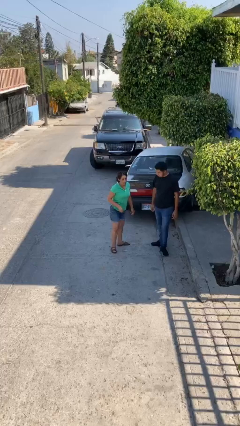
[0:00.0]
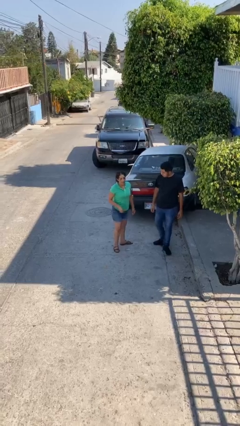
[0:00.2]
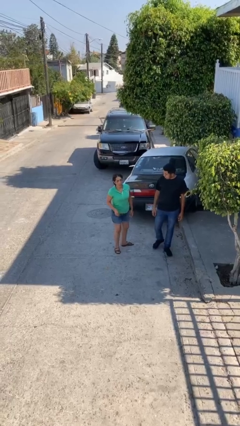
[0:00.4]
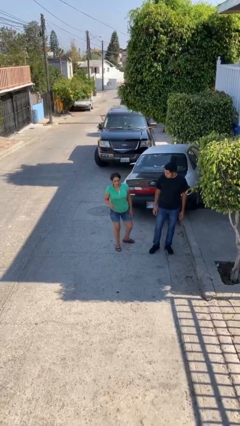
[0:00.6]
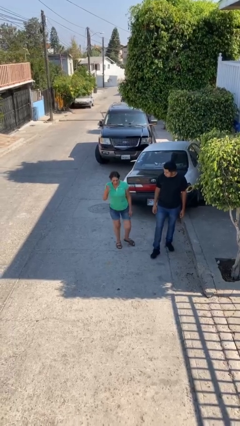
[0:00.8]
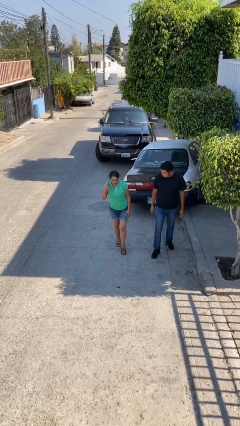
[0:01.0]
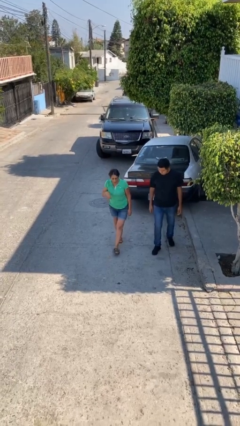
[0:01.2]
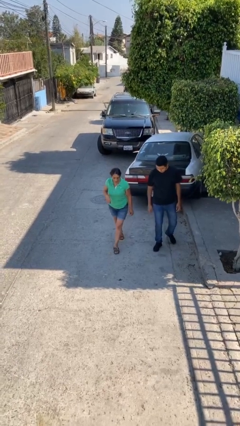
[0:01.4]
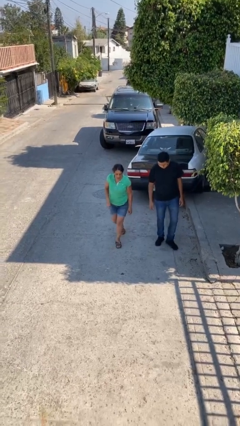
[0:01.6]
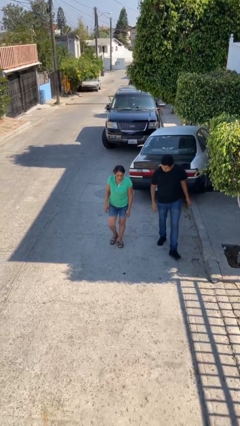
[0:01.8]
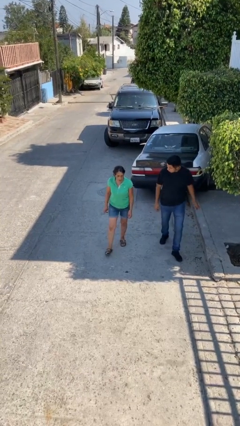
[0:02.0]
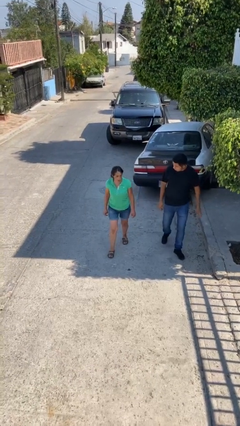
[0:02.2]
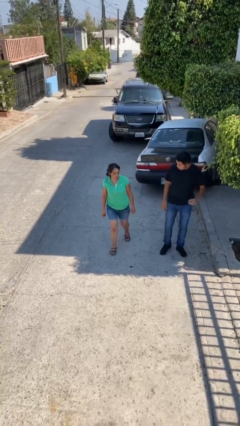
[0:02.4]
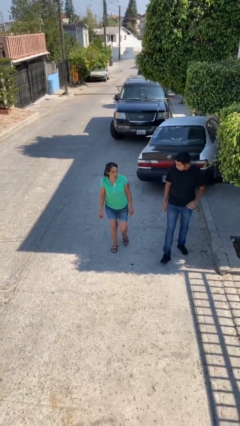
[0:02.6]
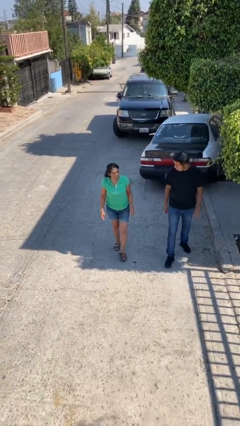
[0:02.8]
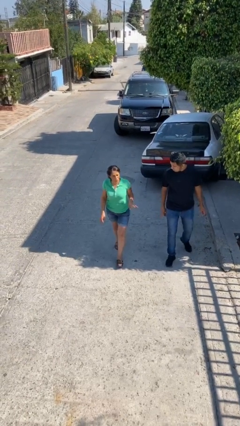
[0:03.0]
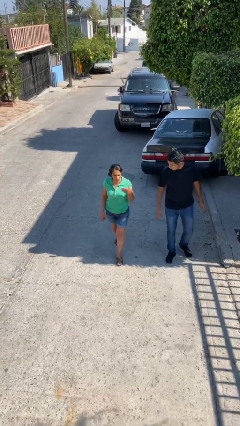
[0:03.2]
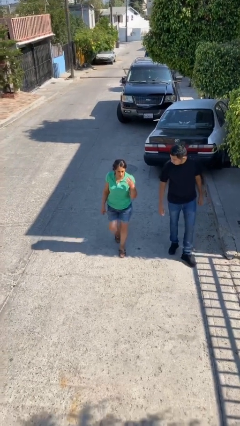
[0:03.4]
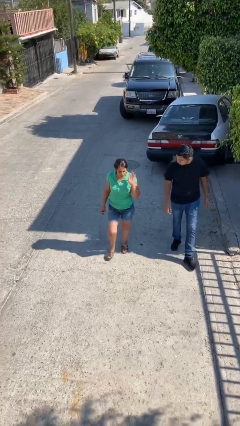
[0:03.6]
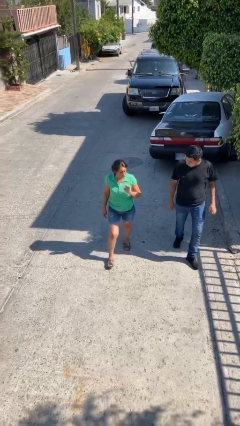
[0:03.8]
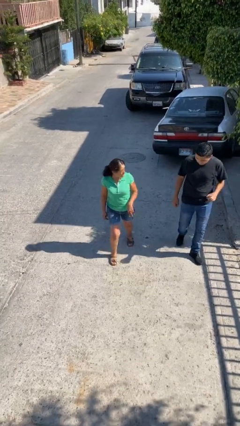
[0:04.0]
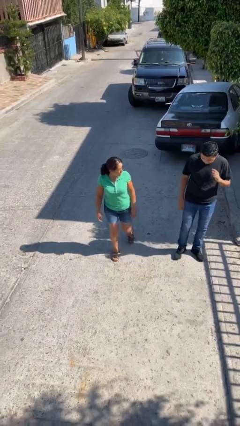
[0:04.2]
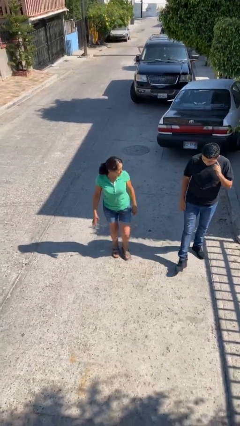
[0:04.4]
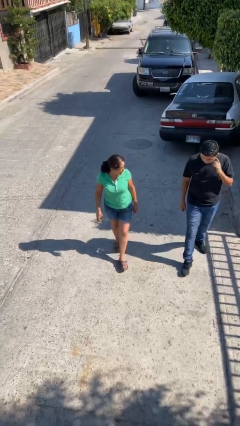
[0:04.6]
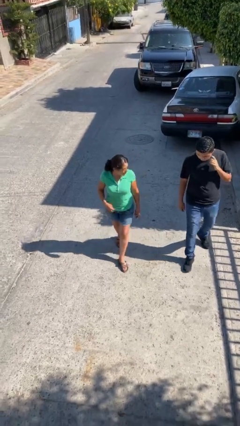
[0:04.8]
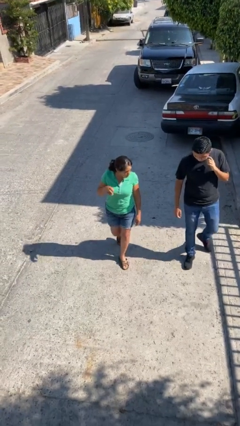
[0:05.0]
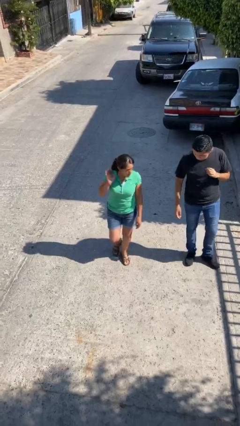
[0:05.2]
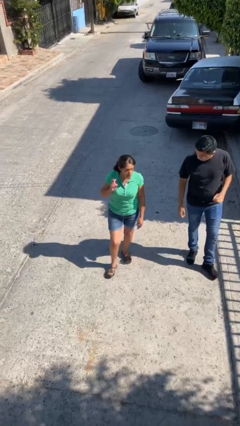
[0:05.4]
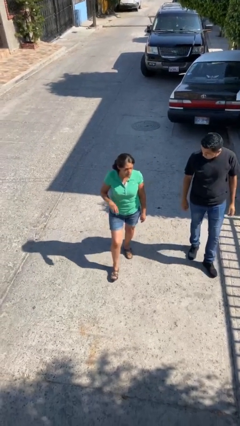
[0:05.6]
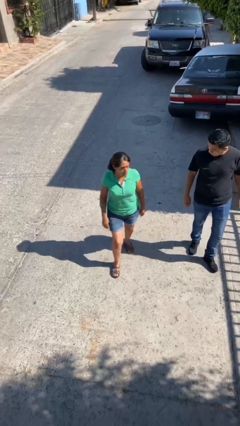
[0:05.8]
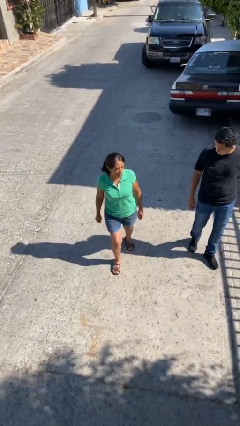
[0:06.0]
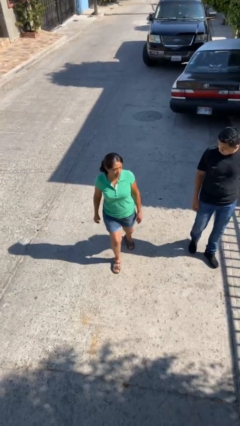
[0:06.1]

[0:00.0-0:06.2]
person talks to person

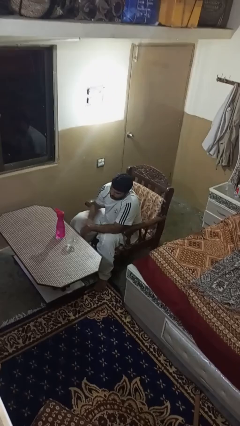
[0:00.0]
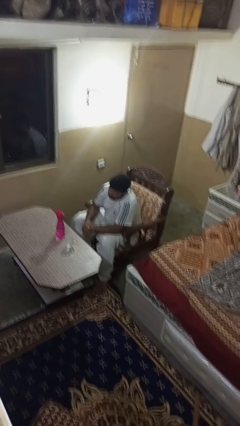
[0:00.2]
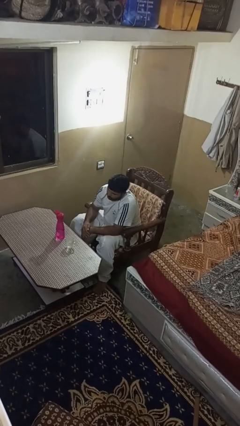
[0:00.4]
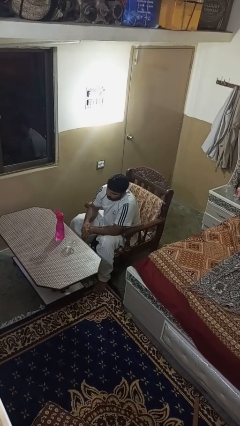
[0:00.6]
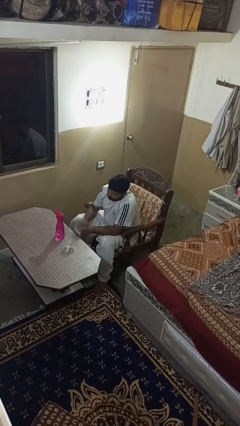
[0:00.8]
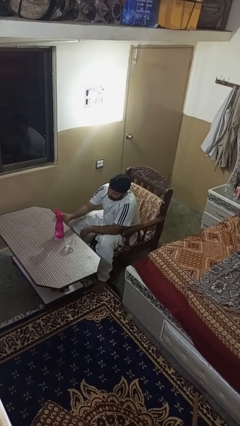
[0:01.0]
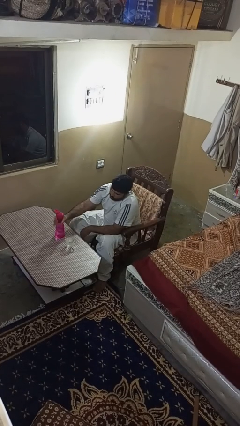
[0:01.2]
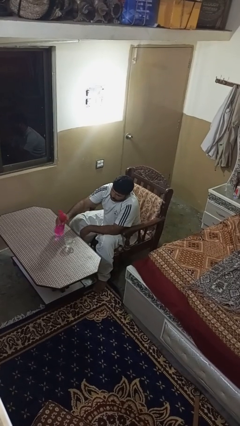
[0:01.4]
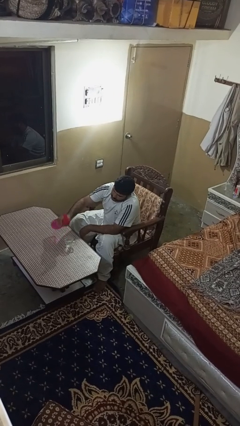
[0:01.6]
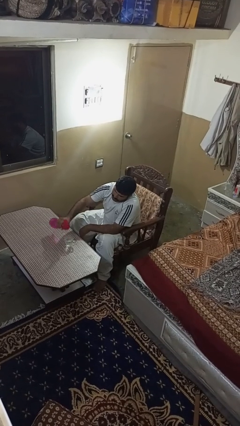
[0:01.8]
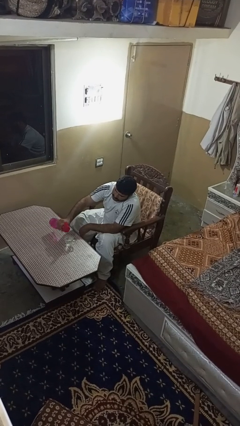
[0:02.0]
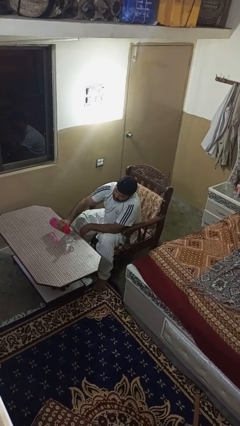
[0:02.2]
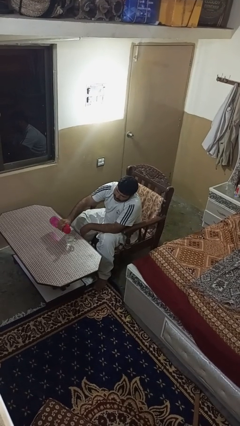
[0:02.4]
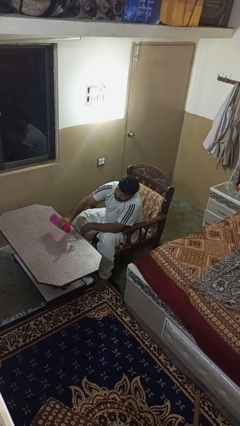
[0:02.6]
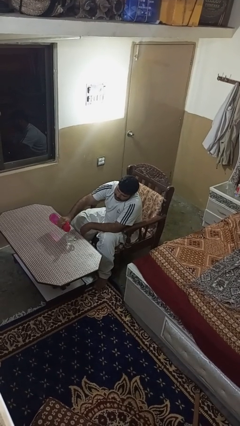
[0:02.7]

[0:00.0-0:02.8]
person pours liquid into cup

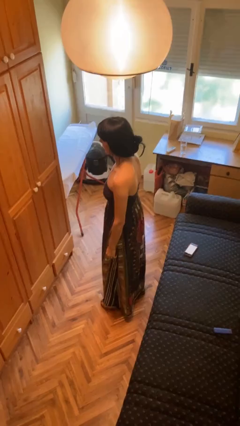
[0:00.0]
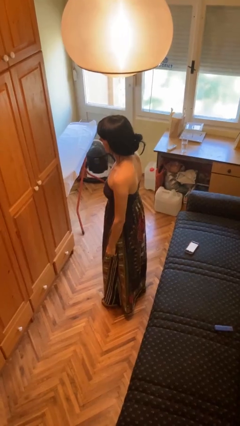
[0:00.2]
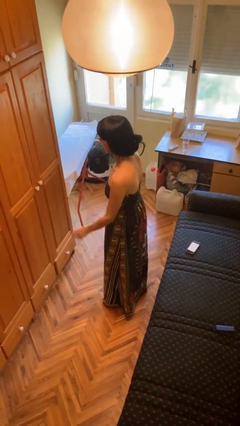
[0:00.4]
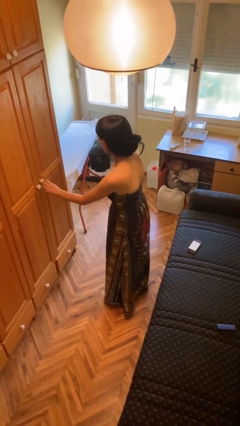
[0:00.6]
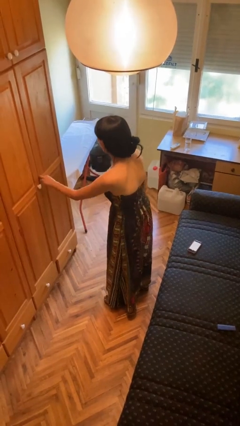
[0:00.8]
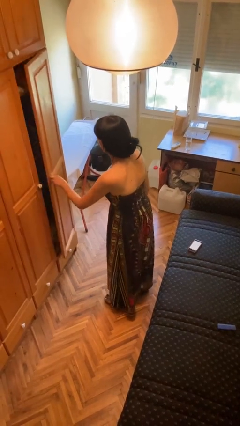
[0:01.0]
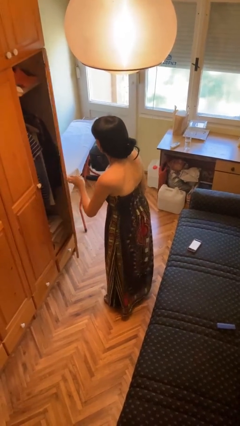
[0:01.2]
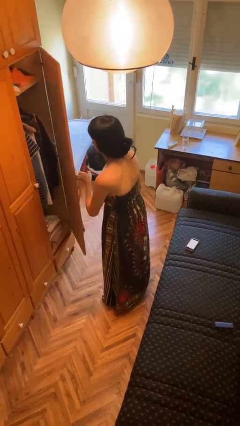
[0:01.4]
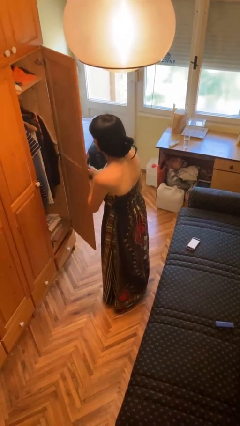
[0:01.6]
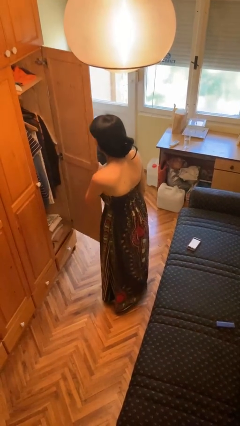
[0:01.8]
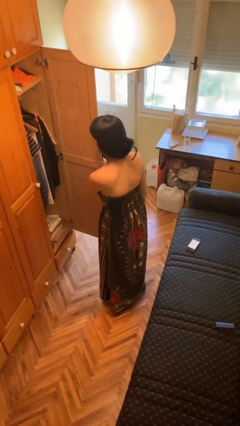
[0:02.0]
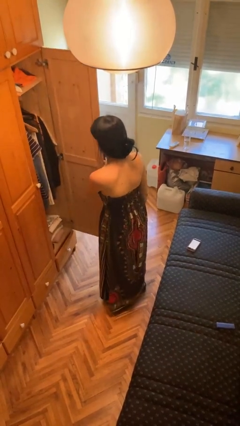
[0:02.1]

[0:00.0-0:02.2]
person opens closet door

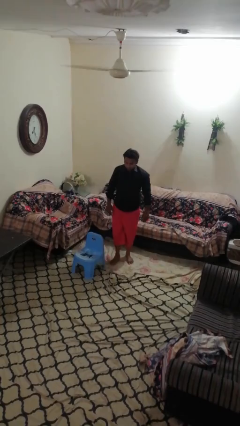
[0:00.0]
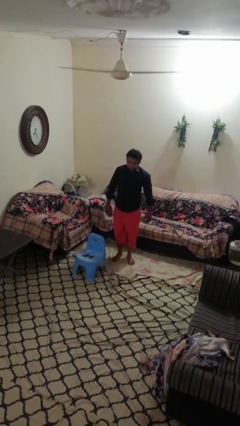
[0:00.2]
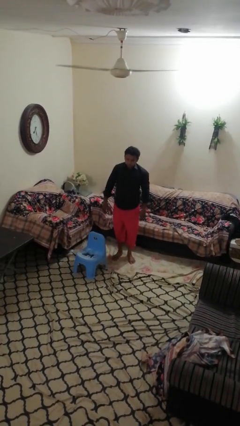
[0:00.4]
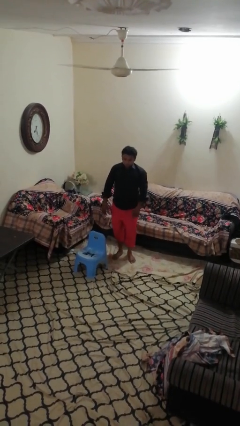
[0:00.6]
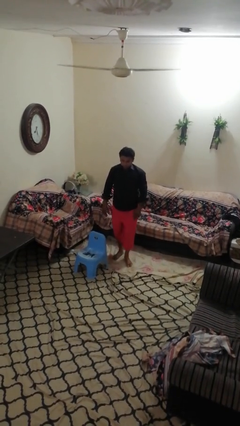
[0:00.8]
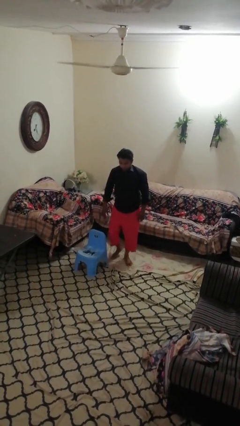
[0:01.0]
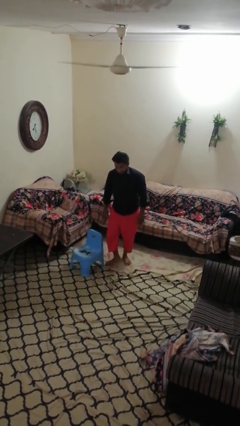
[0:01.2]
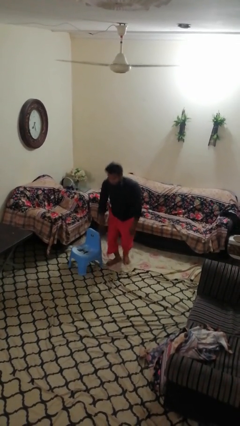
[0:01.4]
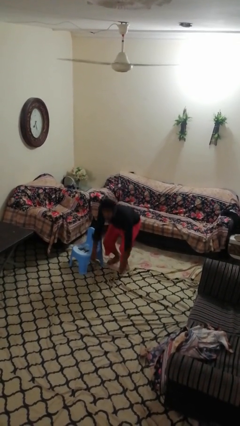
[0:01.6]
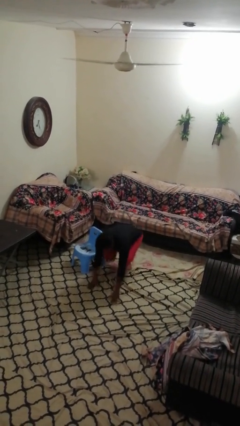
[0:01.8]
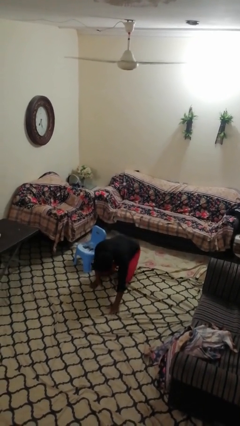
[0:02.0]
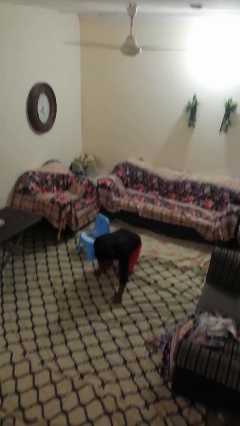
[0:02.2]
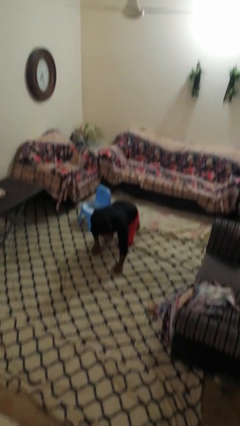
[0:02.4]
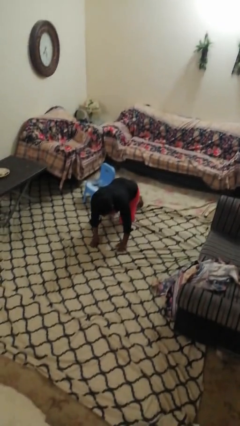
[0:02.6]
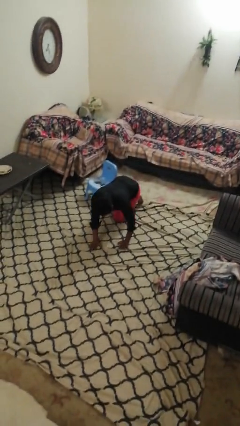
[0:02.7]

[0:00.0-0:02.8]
person trips on object on floor

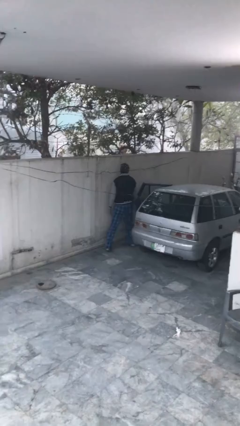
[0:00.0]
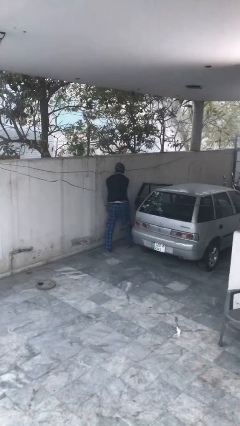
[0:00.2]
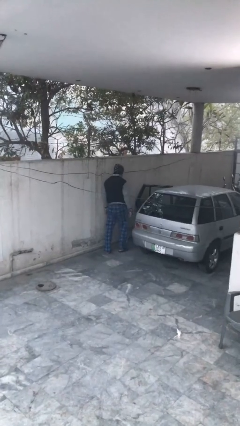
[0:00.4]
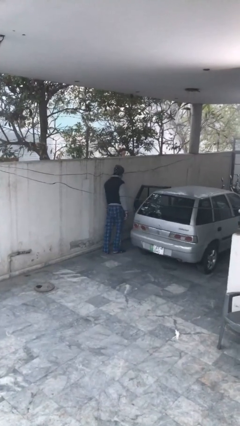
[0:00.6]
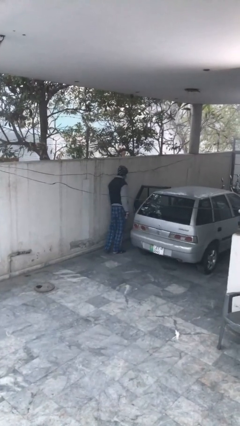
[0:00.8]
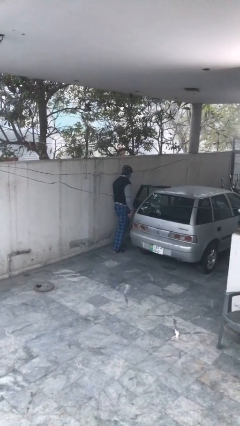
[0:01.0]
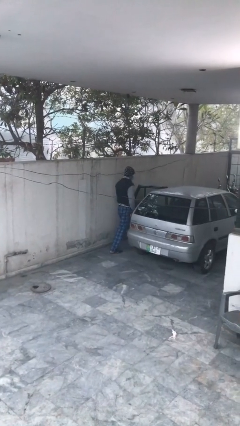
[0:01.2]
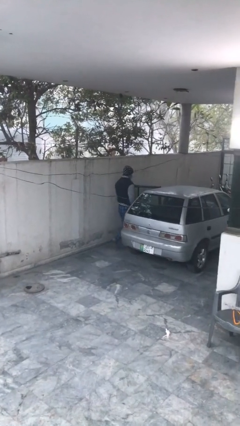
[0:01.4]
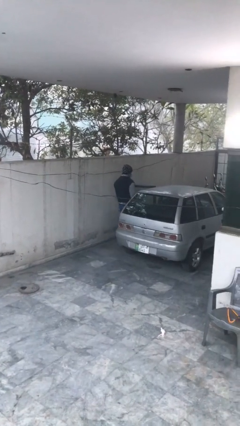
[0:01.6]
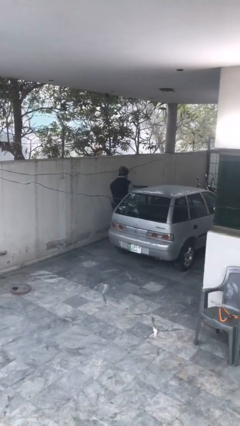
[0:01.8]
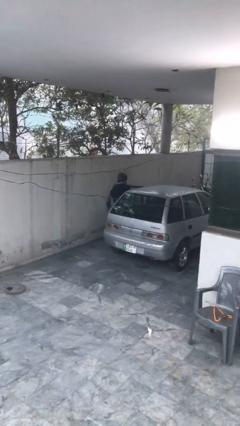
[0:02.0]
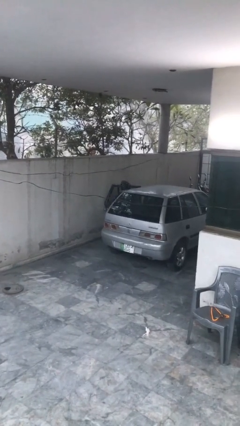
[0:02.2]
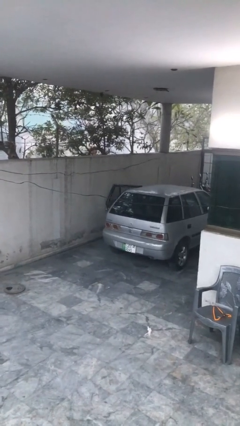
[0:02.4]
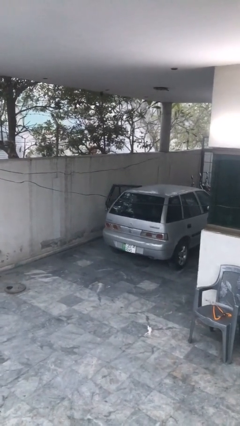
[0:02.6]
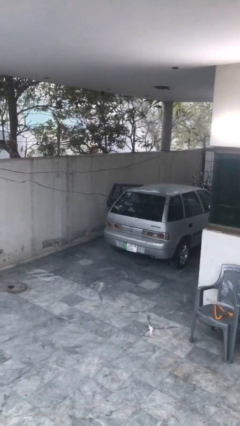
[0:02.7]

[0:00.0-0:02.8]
person enters car

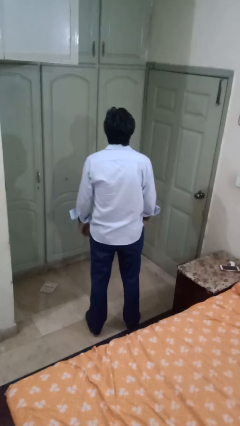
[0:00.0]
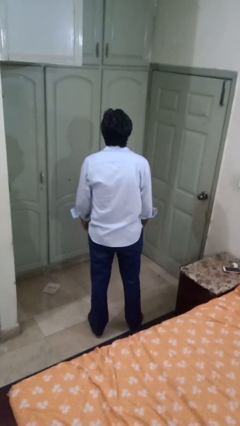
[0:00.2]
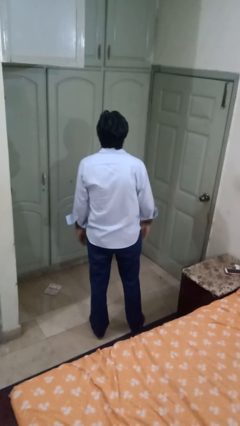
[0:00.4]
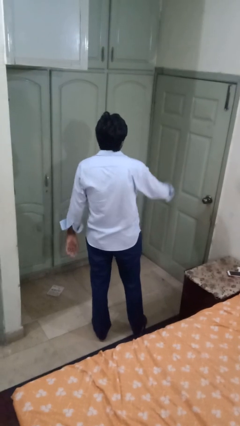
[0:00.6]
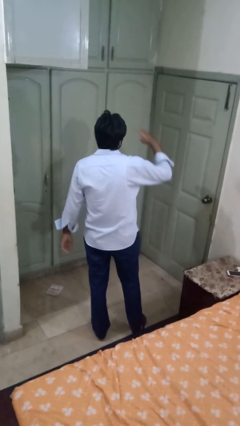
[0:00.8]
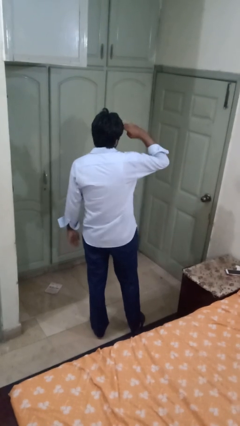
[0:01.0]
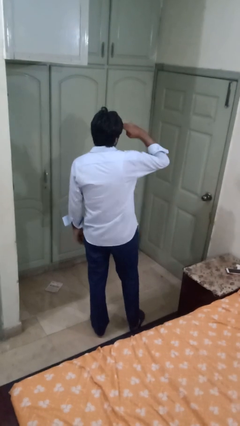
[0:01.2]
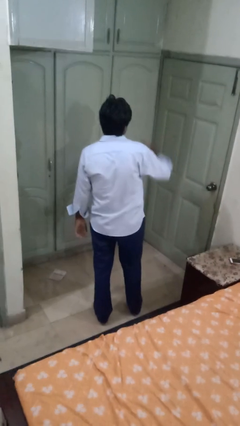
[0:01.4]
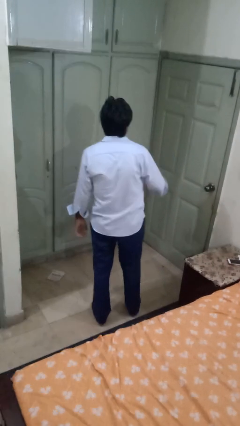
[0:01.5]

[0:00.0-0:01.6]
person salutes
